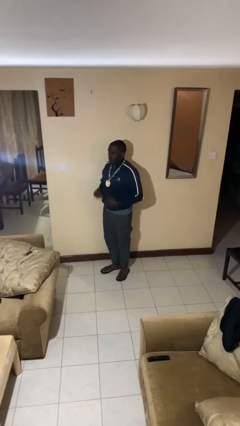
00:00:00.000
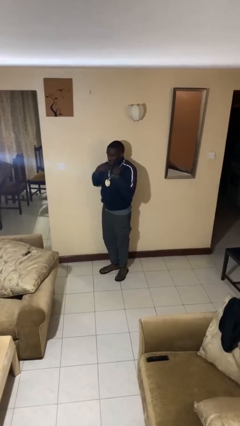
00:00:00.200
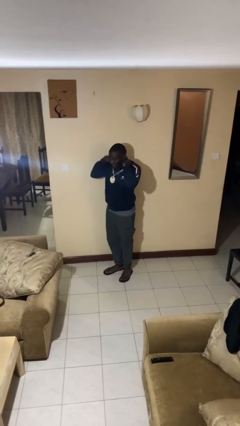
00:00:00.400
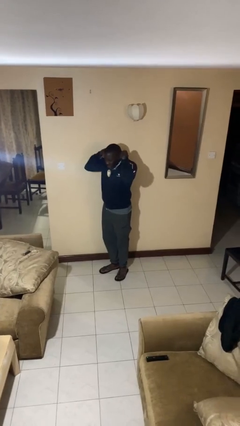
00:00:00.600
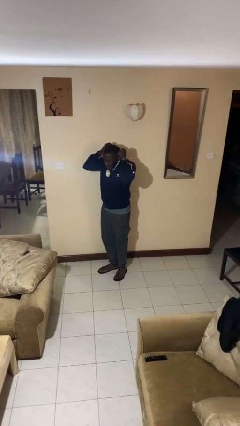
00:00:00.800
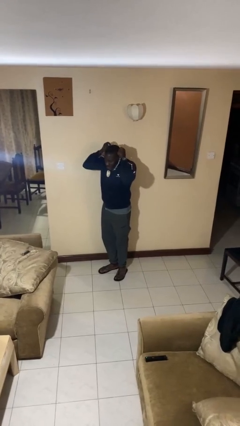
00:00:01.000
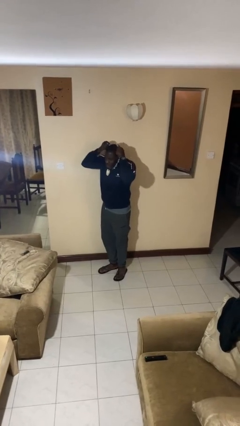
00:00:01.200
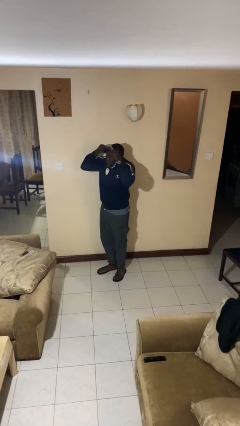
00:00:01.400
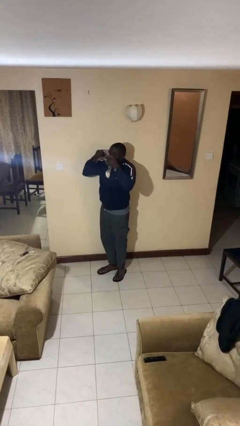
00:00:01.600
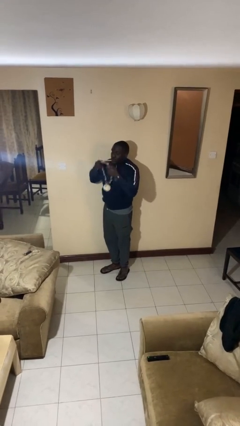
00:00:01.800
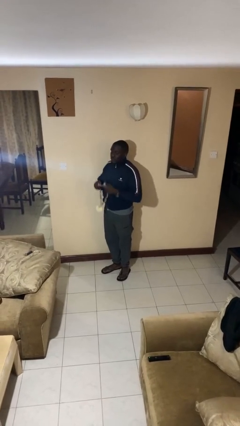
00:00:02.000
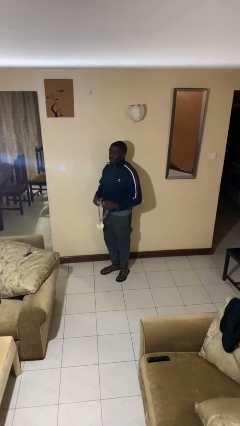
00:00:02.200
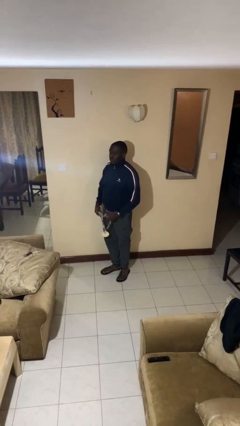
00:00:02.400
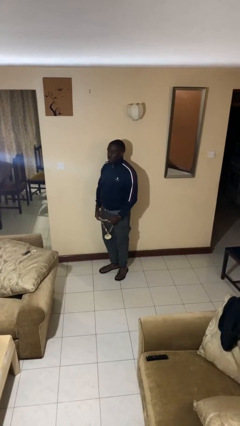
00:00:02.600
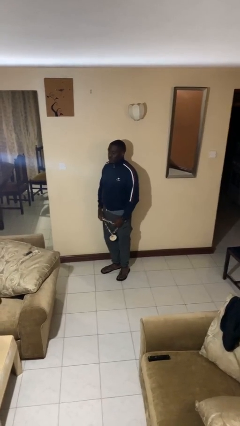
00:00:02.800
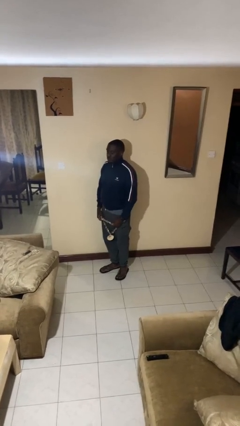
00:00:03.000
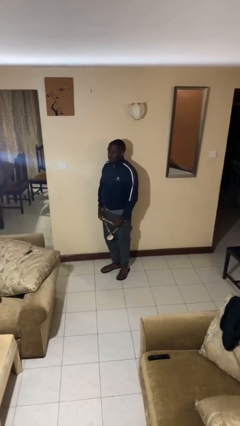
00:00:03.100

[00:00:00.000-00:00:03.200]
person takes off necklace

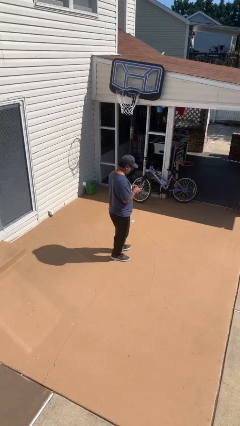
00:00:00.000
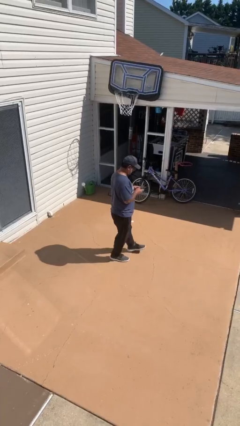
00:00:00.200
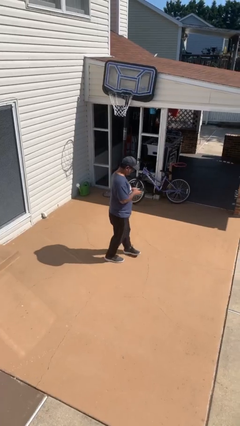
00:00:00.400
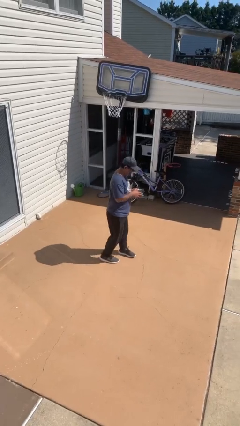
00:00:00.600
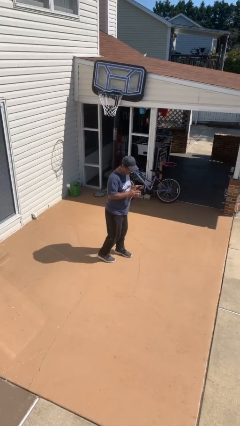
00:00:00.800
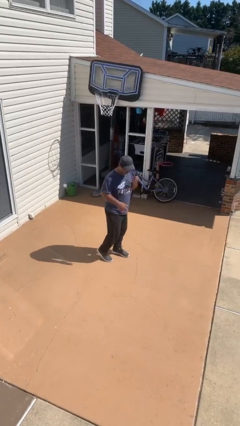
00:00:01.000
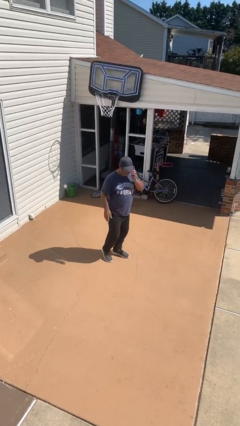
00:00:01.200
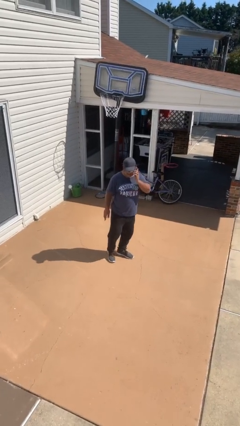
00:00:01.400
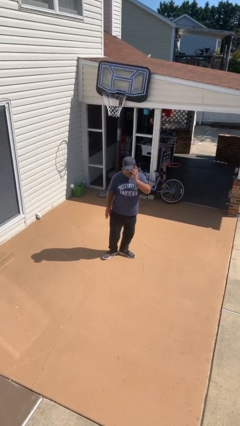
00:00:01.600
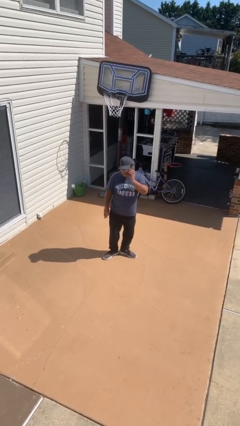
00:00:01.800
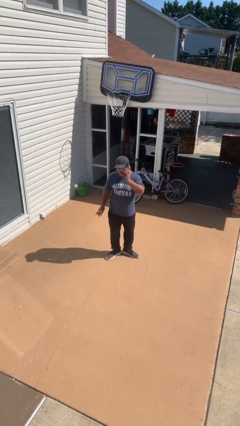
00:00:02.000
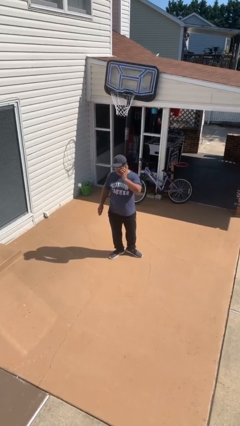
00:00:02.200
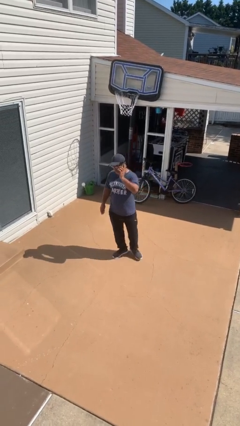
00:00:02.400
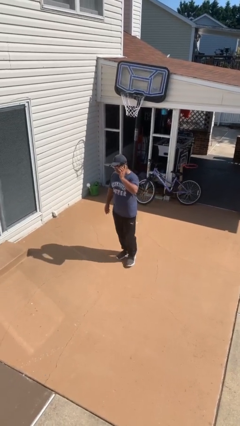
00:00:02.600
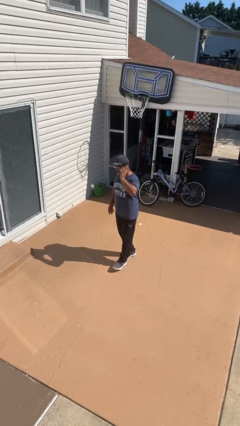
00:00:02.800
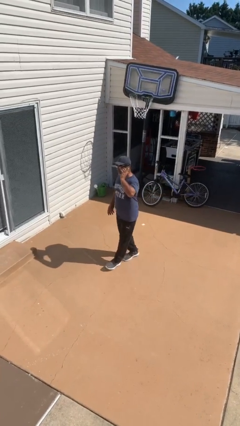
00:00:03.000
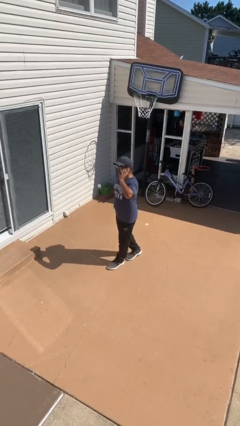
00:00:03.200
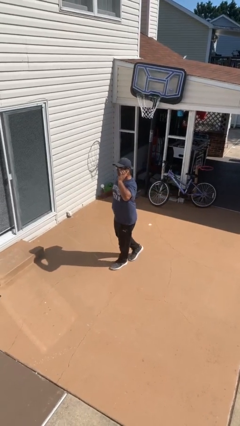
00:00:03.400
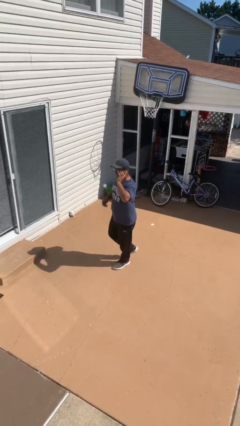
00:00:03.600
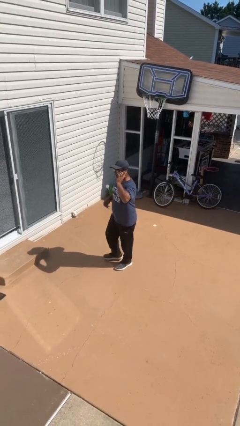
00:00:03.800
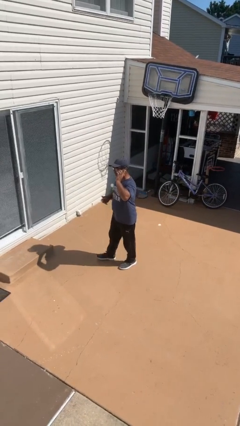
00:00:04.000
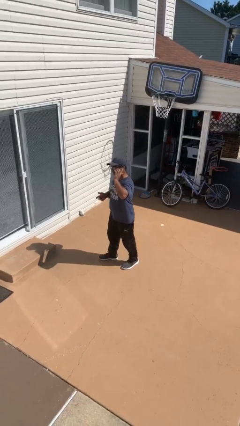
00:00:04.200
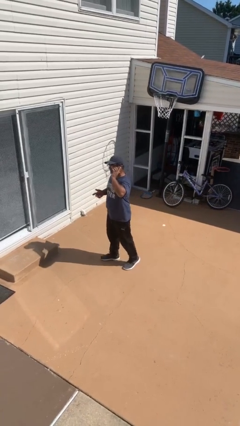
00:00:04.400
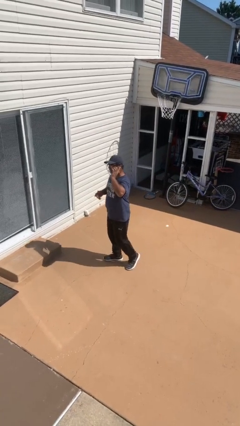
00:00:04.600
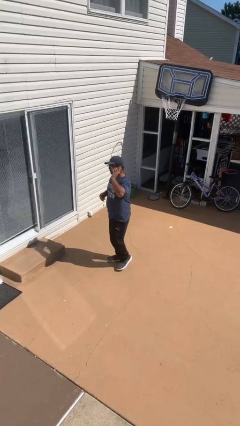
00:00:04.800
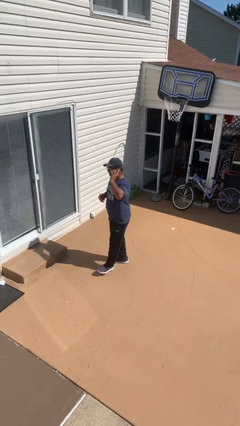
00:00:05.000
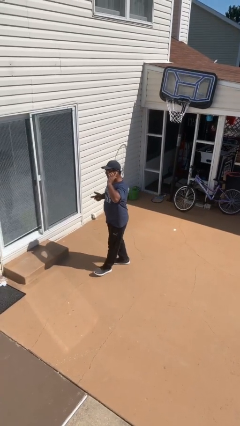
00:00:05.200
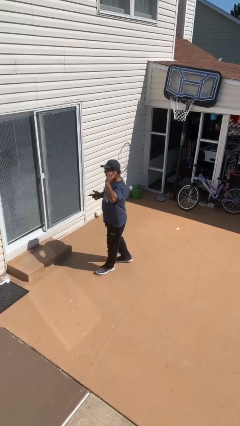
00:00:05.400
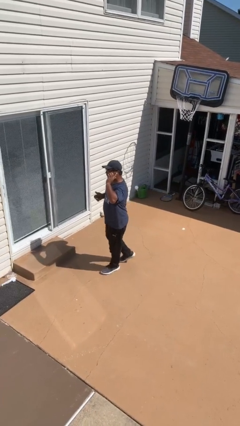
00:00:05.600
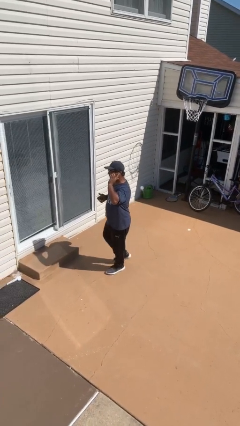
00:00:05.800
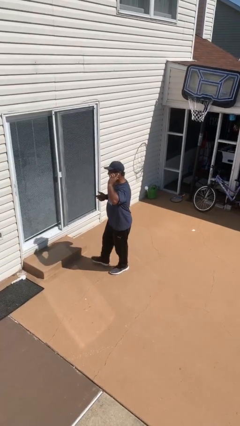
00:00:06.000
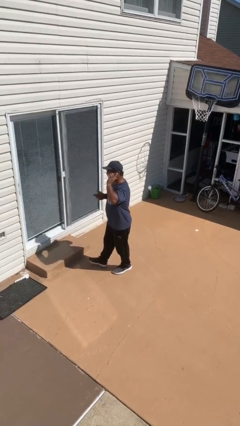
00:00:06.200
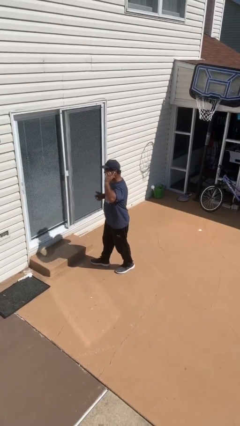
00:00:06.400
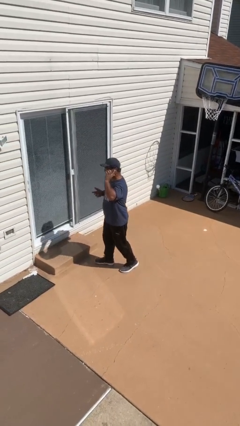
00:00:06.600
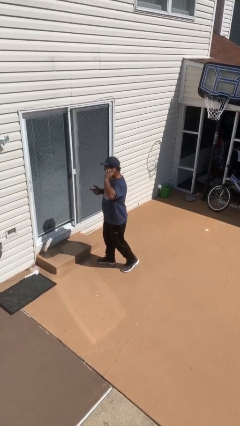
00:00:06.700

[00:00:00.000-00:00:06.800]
person talks on phone

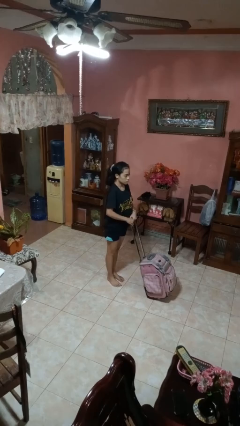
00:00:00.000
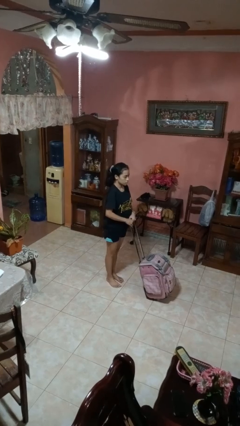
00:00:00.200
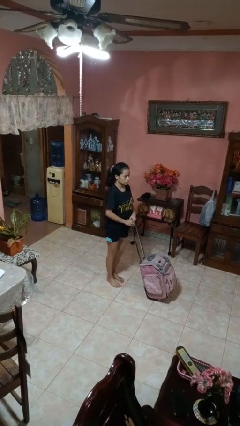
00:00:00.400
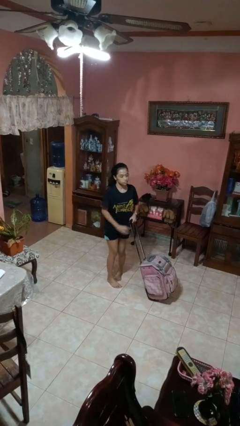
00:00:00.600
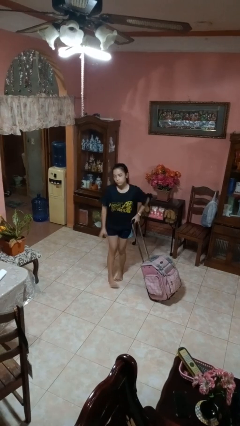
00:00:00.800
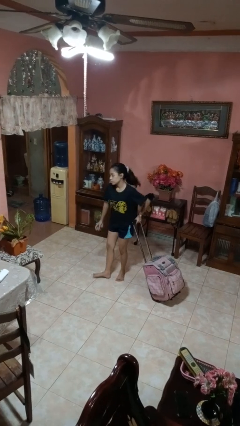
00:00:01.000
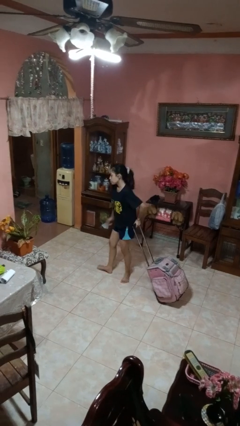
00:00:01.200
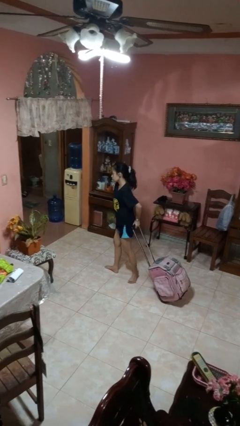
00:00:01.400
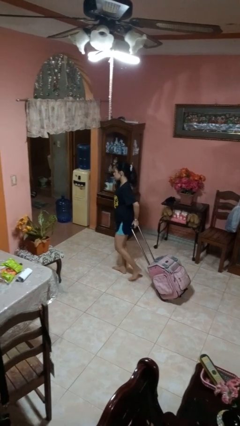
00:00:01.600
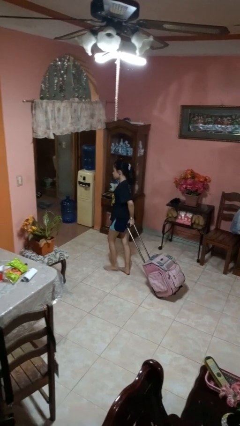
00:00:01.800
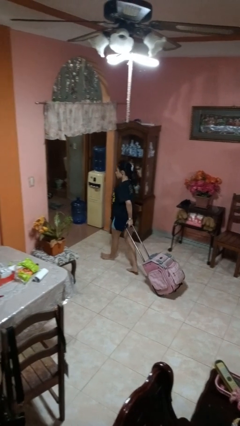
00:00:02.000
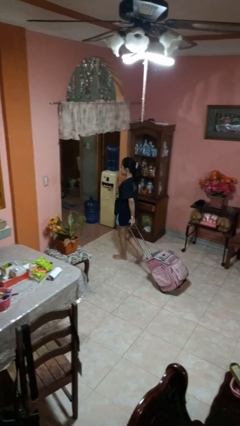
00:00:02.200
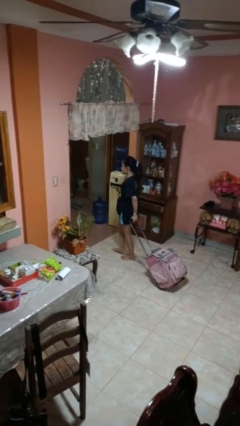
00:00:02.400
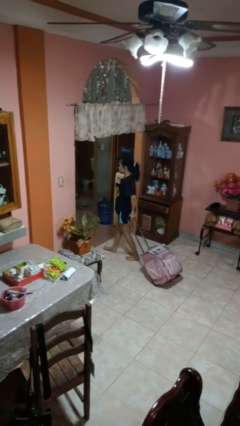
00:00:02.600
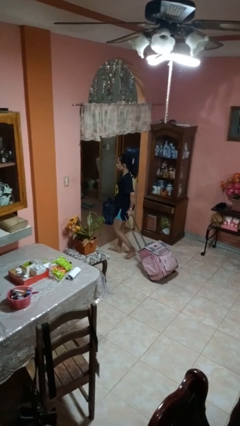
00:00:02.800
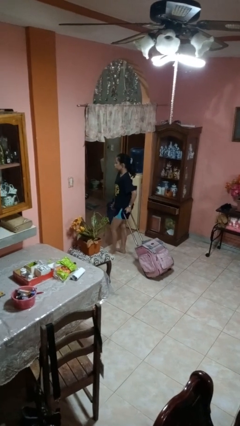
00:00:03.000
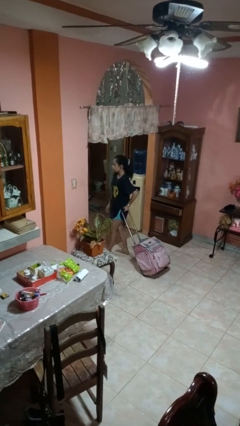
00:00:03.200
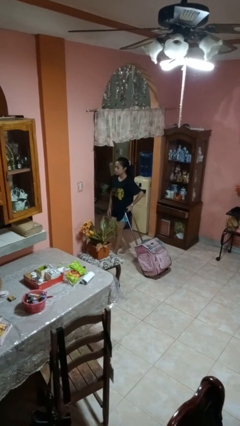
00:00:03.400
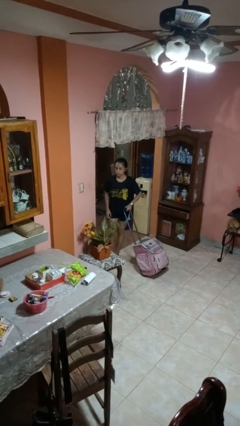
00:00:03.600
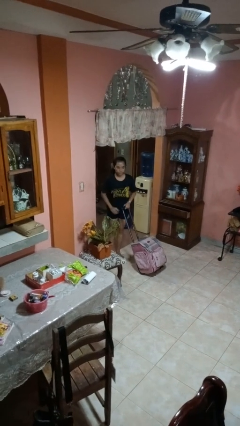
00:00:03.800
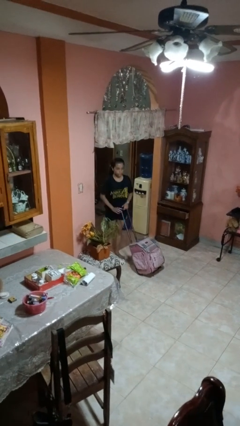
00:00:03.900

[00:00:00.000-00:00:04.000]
person pulls wheeled cart

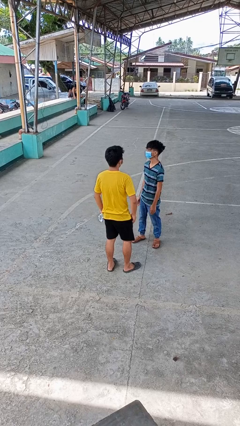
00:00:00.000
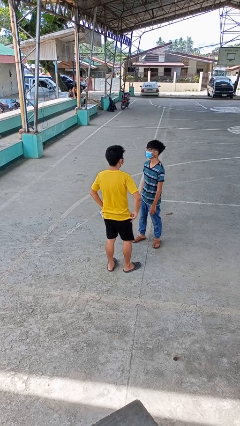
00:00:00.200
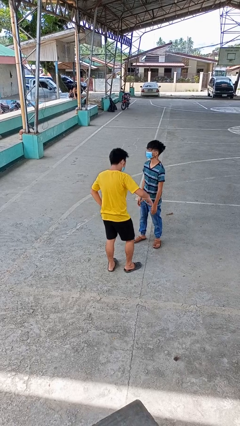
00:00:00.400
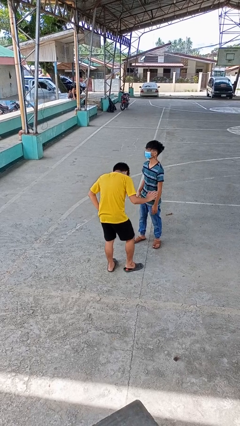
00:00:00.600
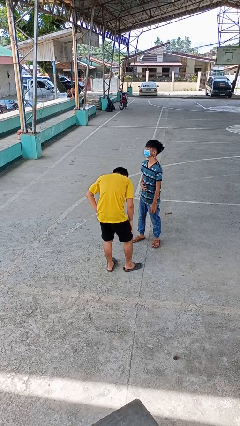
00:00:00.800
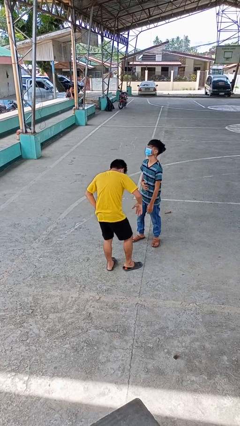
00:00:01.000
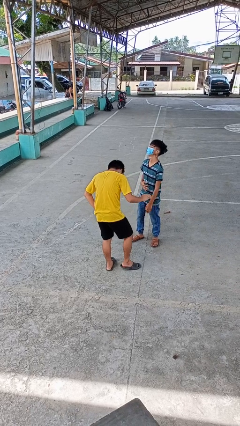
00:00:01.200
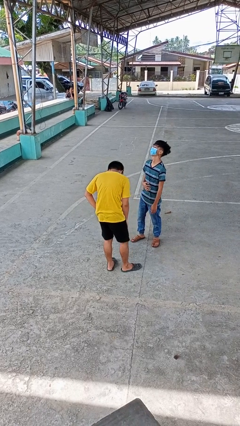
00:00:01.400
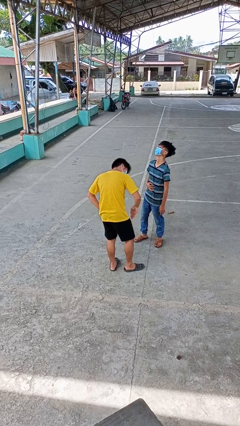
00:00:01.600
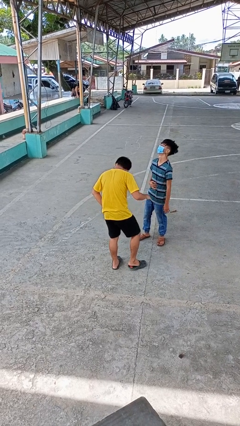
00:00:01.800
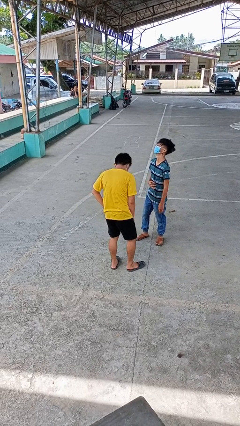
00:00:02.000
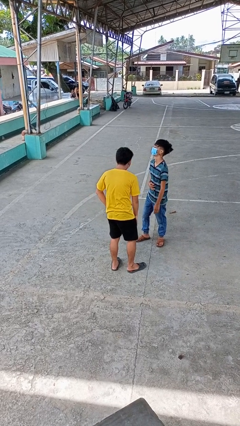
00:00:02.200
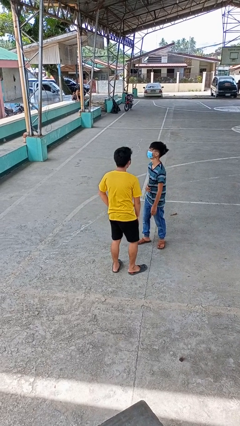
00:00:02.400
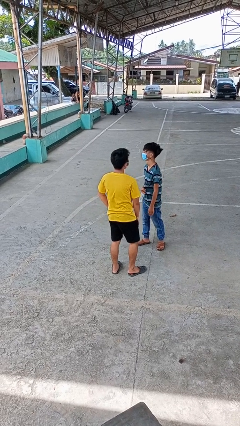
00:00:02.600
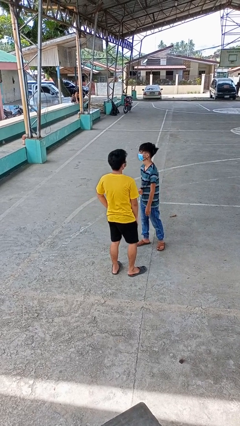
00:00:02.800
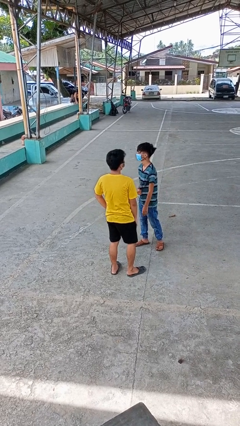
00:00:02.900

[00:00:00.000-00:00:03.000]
person laughs with person

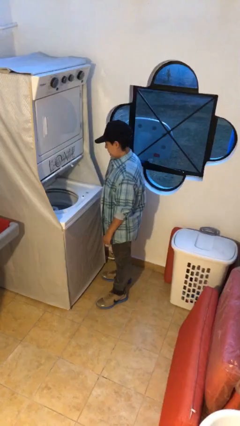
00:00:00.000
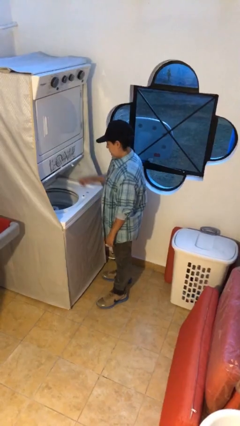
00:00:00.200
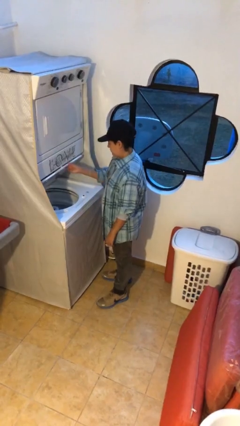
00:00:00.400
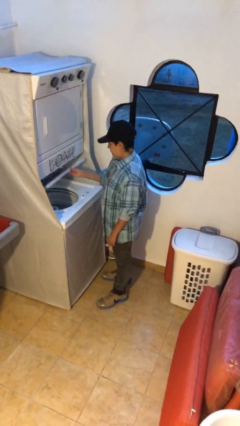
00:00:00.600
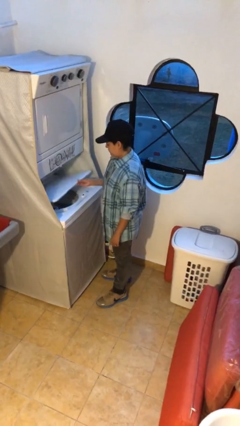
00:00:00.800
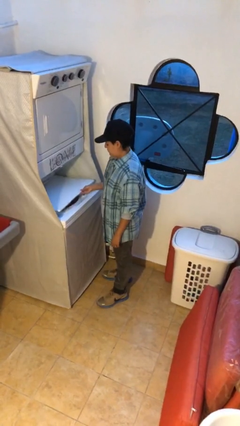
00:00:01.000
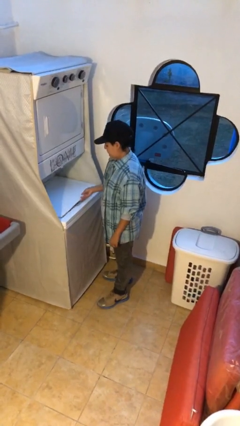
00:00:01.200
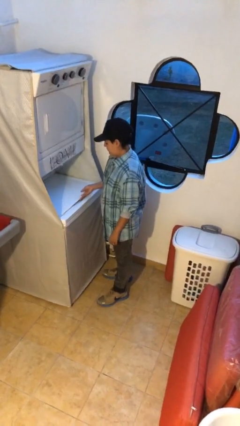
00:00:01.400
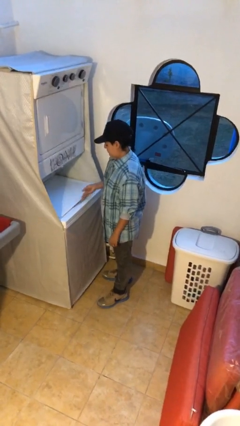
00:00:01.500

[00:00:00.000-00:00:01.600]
person closes clothes washer
